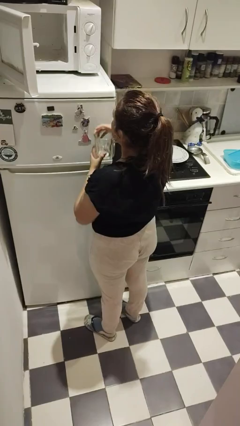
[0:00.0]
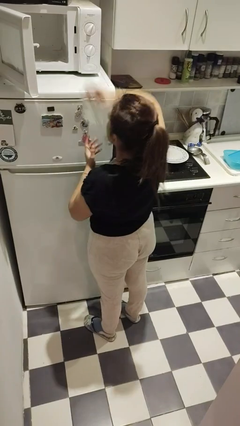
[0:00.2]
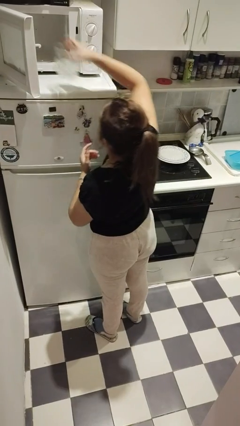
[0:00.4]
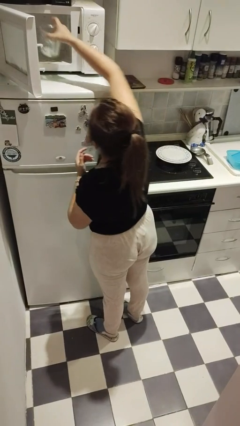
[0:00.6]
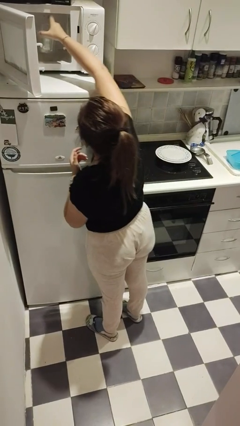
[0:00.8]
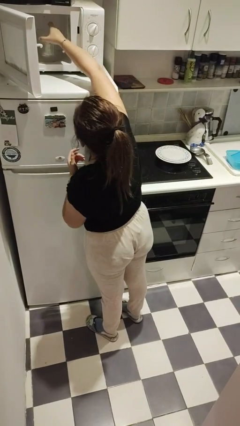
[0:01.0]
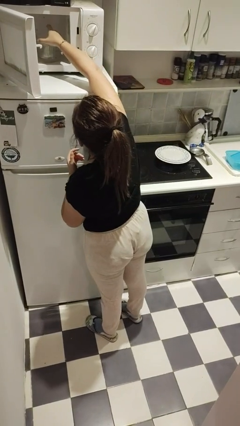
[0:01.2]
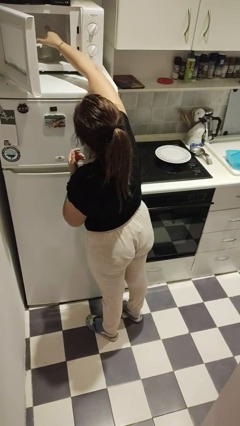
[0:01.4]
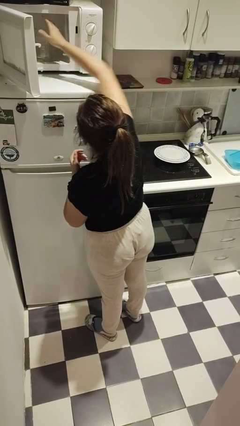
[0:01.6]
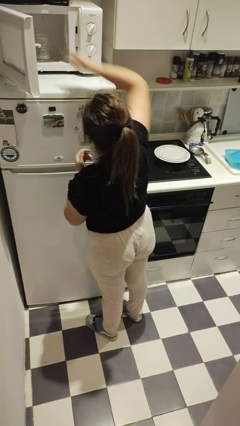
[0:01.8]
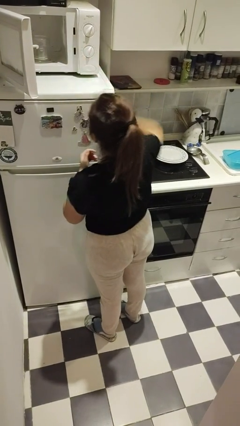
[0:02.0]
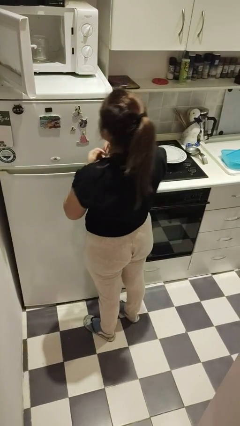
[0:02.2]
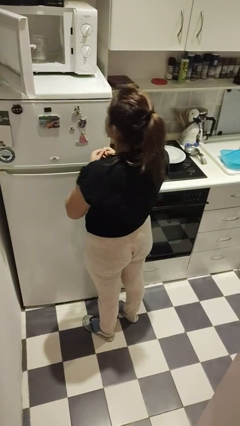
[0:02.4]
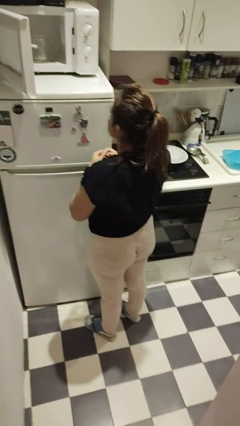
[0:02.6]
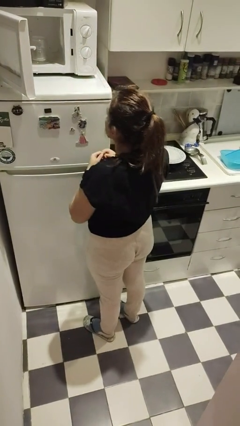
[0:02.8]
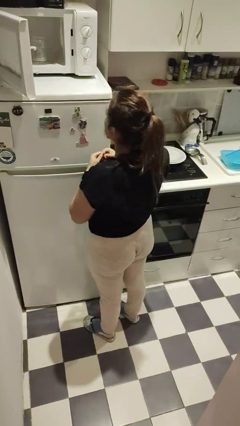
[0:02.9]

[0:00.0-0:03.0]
person puts object into microwave

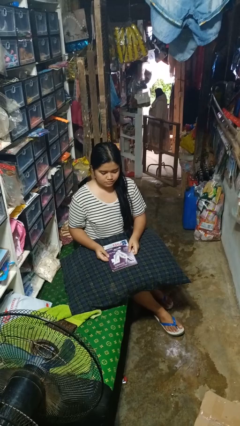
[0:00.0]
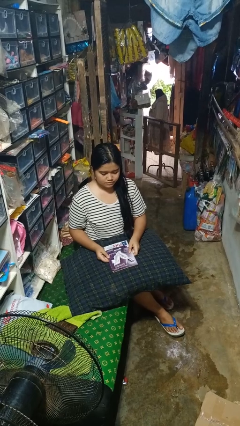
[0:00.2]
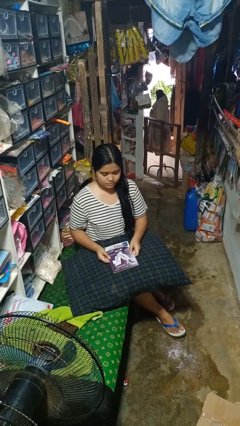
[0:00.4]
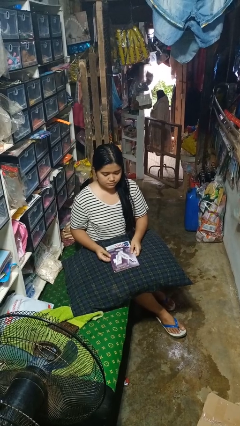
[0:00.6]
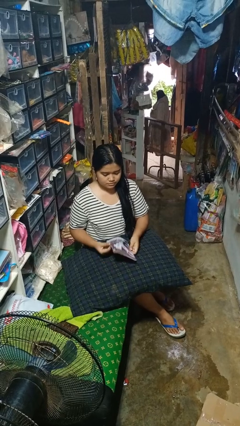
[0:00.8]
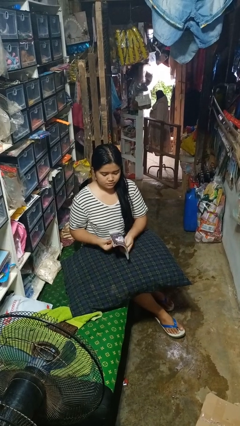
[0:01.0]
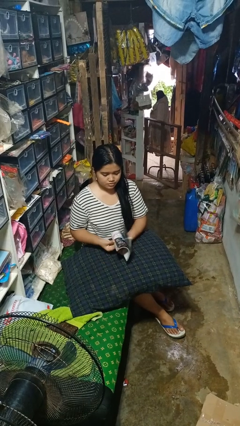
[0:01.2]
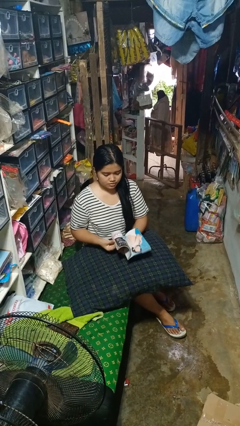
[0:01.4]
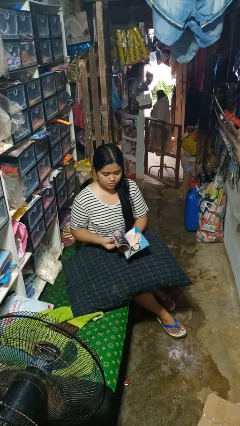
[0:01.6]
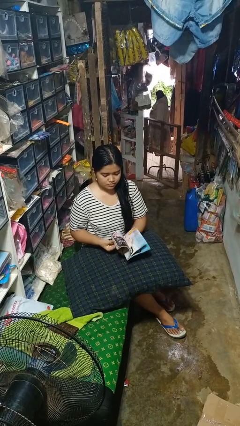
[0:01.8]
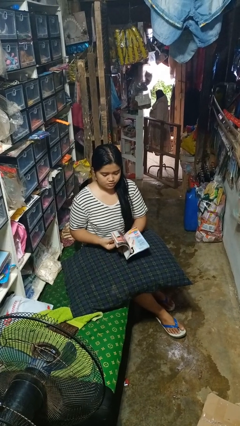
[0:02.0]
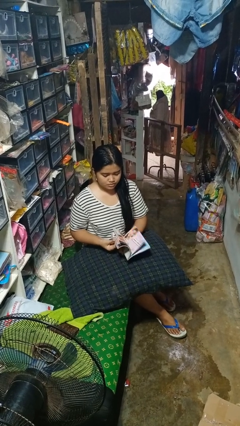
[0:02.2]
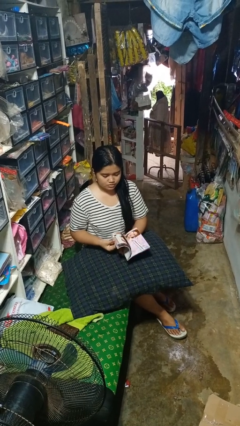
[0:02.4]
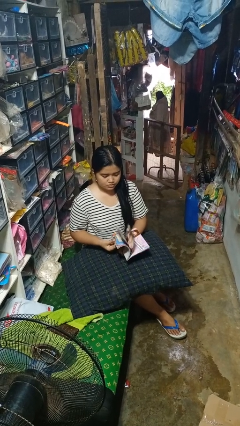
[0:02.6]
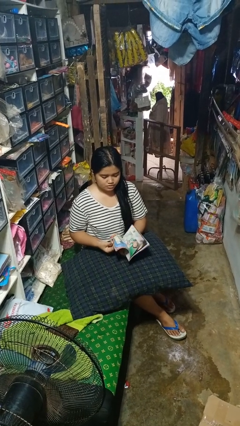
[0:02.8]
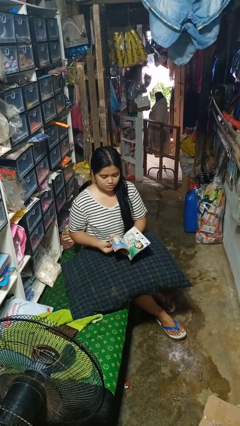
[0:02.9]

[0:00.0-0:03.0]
person reads magazine

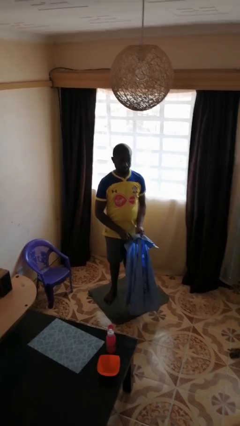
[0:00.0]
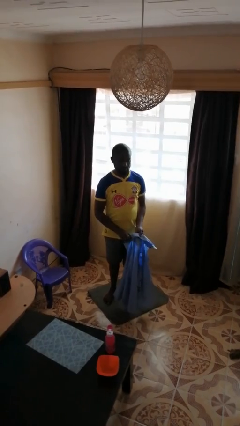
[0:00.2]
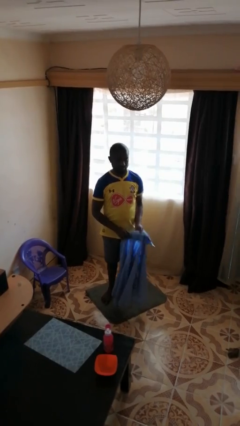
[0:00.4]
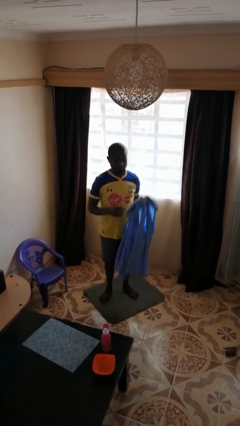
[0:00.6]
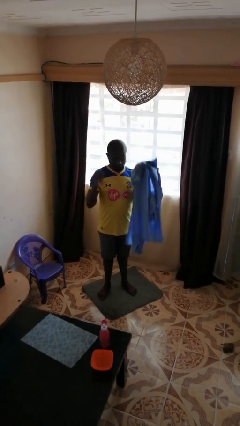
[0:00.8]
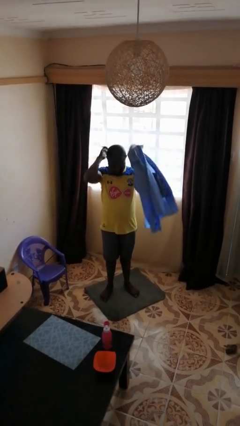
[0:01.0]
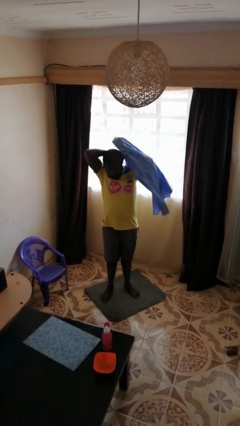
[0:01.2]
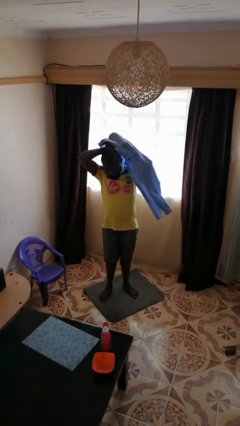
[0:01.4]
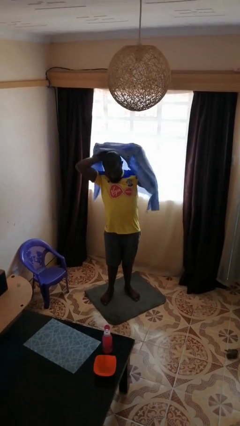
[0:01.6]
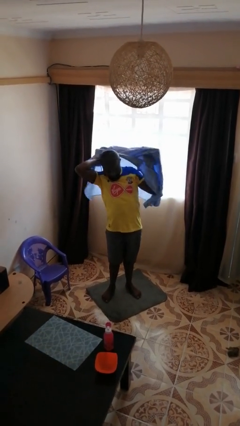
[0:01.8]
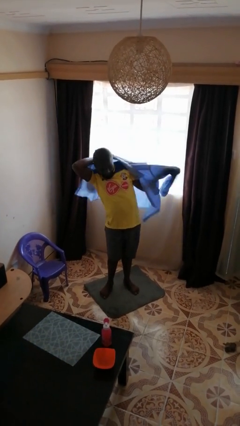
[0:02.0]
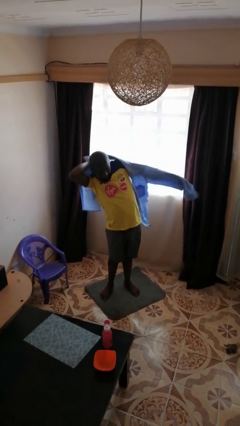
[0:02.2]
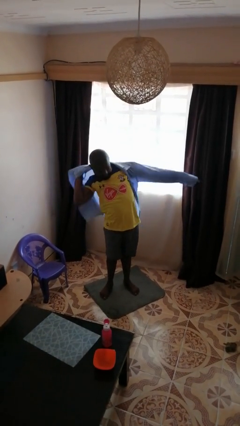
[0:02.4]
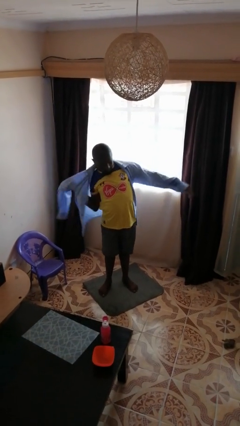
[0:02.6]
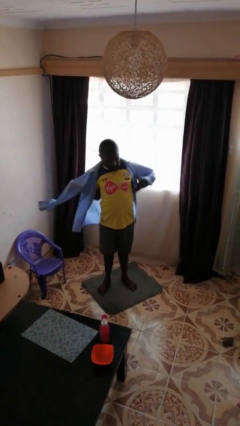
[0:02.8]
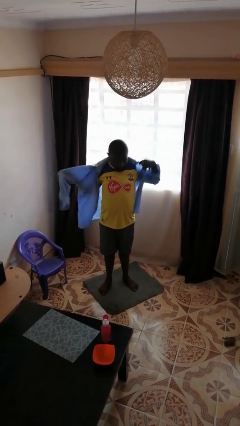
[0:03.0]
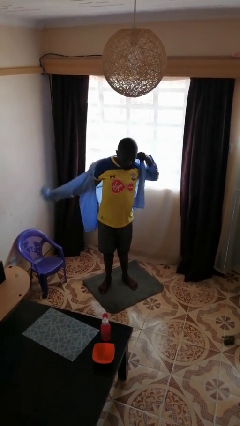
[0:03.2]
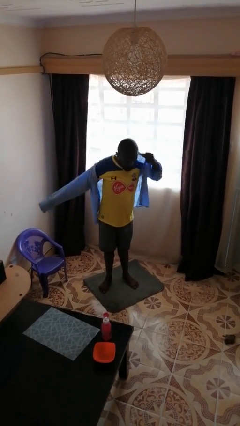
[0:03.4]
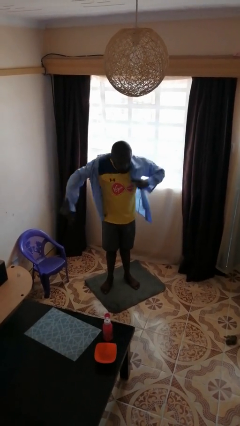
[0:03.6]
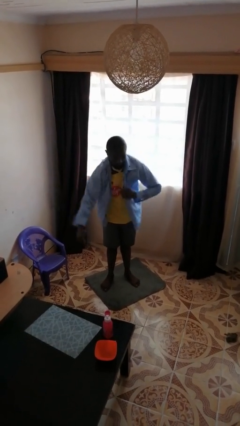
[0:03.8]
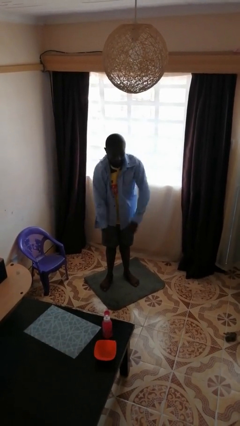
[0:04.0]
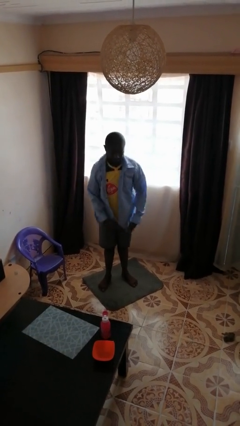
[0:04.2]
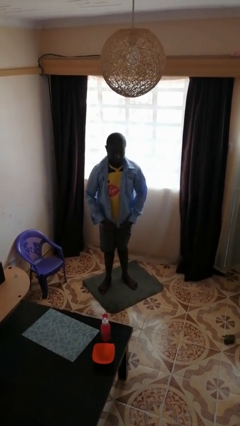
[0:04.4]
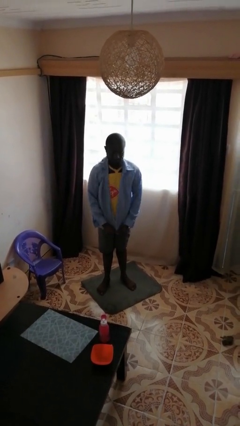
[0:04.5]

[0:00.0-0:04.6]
person puts on shirt

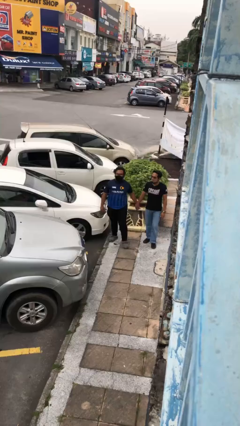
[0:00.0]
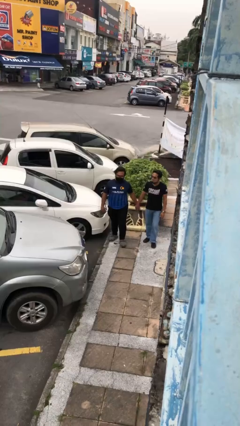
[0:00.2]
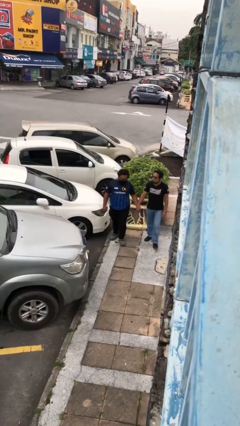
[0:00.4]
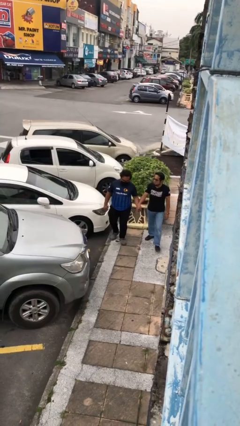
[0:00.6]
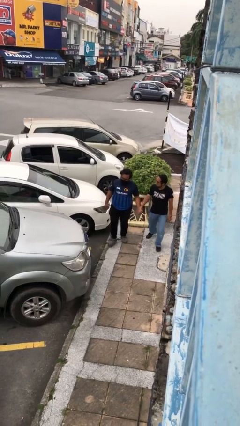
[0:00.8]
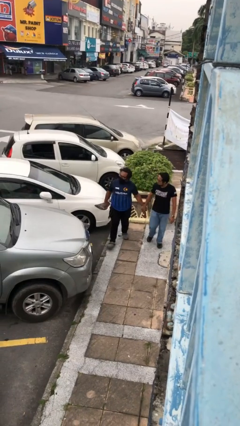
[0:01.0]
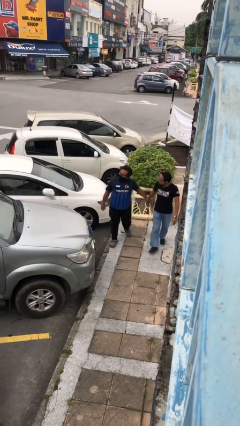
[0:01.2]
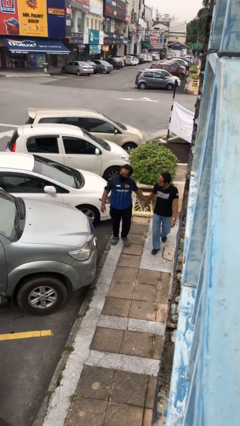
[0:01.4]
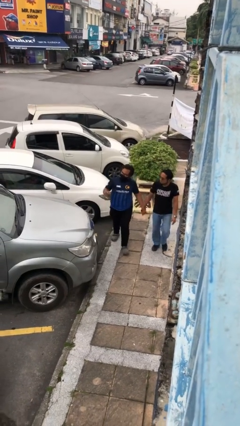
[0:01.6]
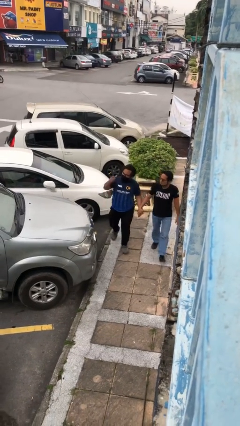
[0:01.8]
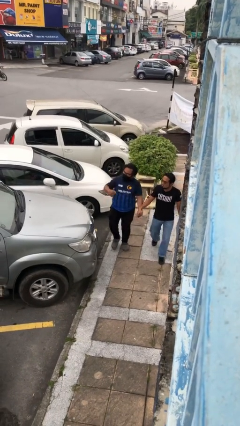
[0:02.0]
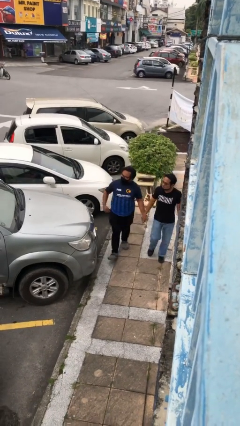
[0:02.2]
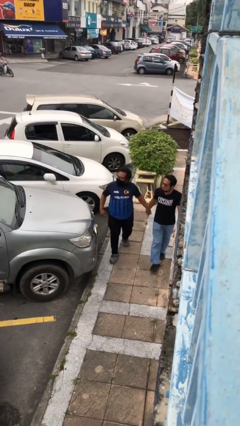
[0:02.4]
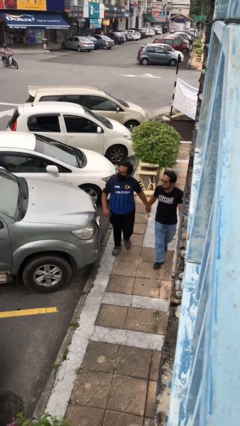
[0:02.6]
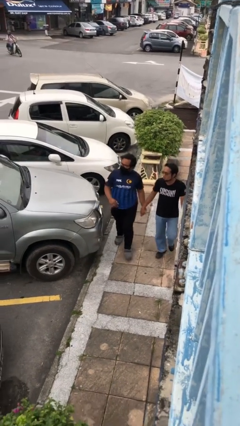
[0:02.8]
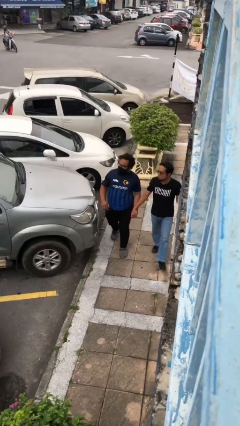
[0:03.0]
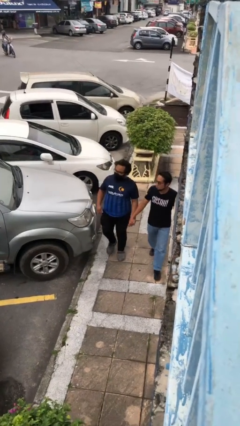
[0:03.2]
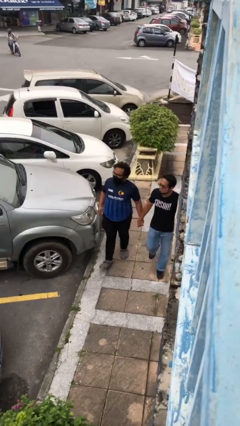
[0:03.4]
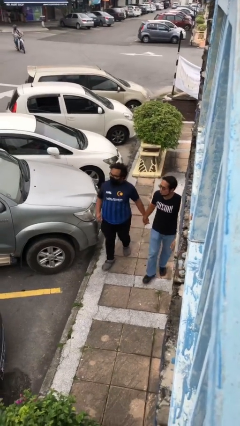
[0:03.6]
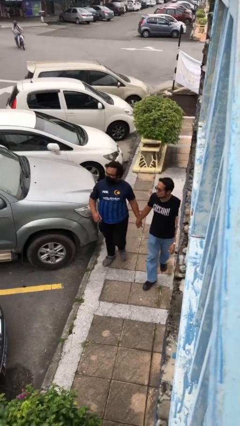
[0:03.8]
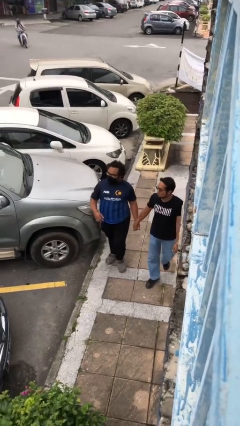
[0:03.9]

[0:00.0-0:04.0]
person holds hand

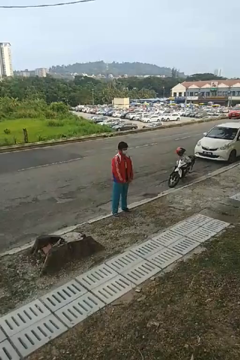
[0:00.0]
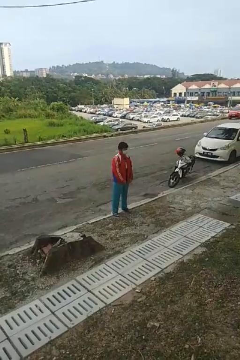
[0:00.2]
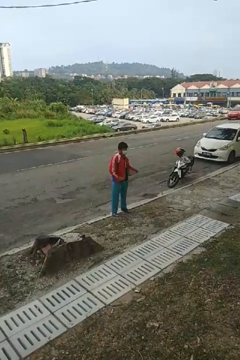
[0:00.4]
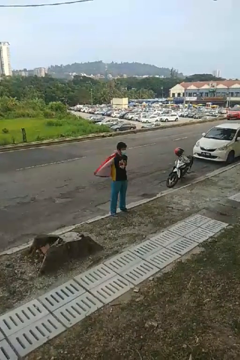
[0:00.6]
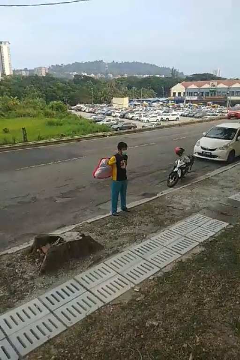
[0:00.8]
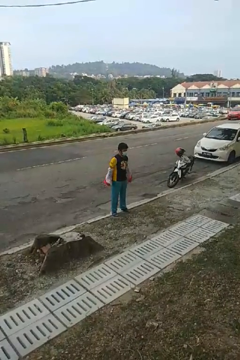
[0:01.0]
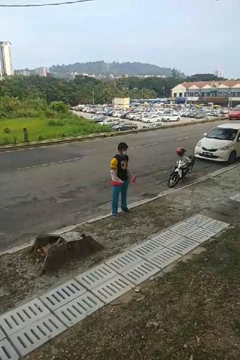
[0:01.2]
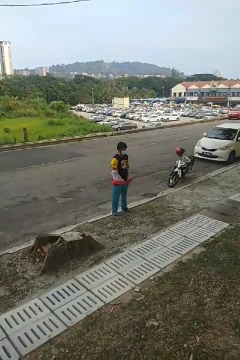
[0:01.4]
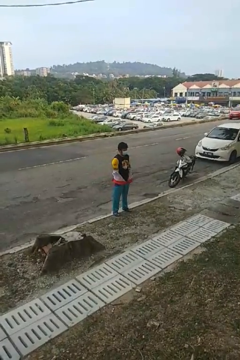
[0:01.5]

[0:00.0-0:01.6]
person takes off jacket

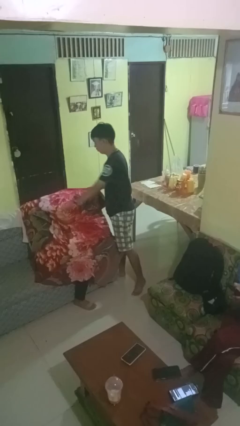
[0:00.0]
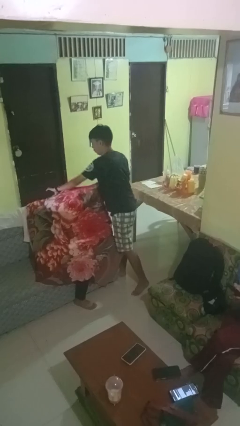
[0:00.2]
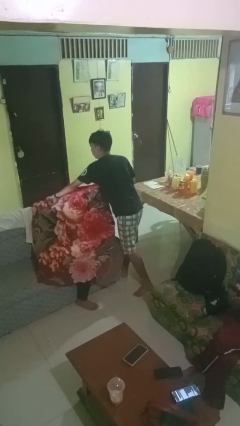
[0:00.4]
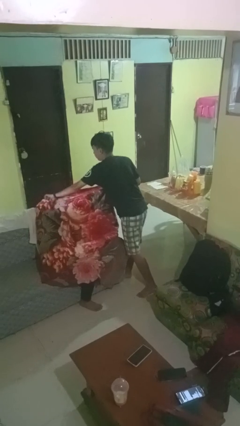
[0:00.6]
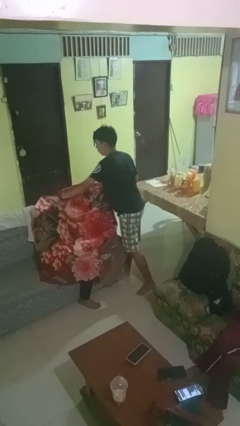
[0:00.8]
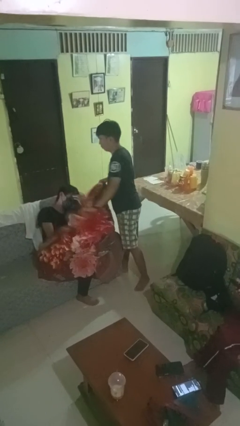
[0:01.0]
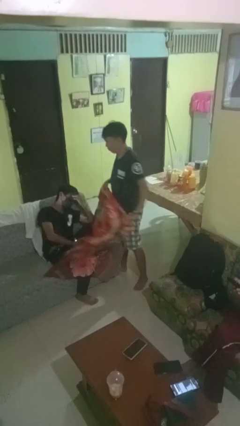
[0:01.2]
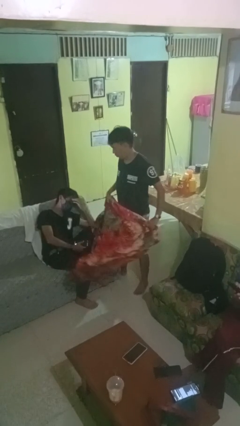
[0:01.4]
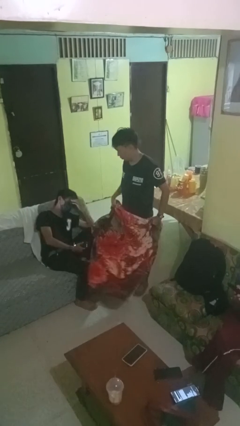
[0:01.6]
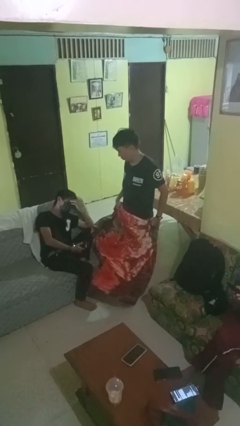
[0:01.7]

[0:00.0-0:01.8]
person uncovers friend with blanket
